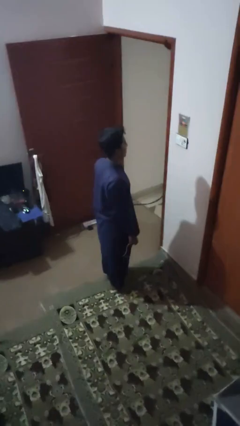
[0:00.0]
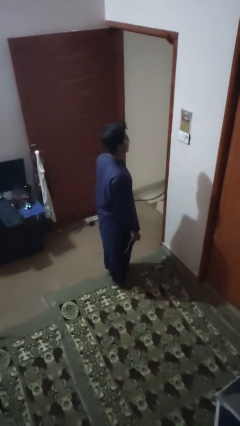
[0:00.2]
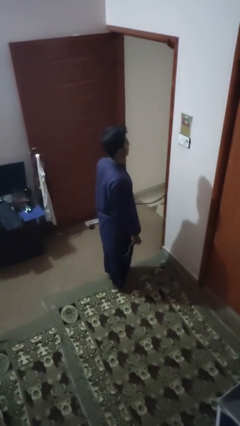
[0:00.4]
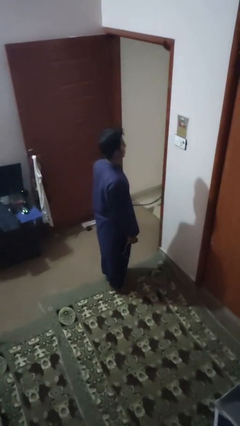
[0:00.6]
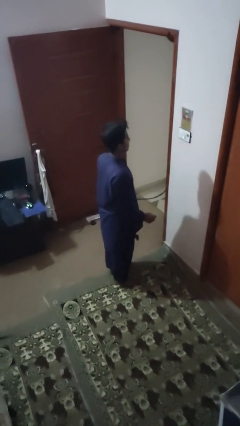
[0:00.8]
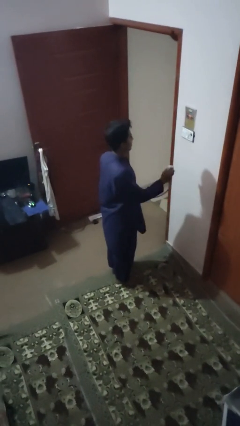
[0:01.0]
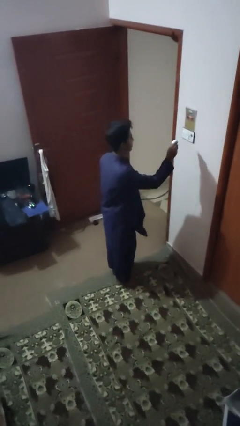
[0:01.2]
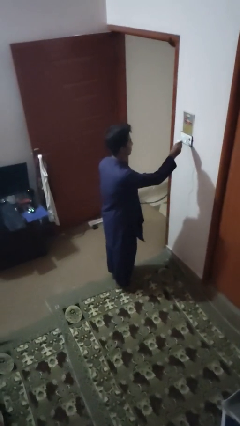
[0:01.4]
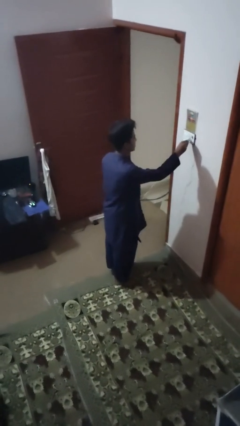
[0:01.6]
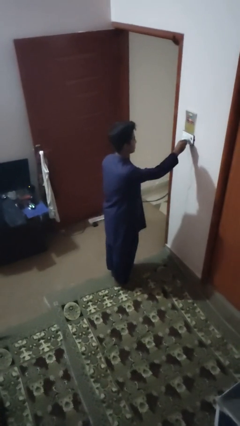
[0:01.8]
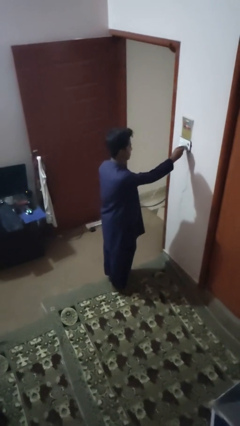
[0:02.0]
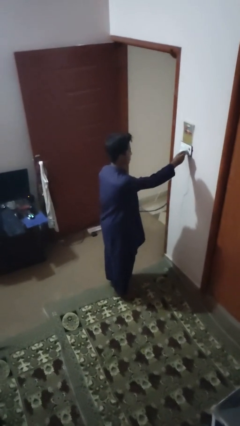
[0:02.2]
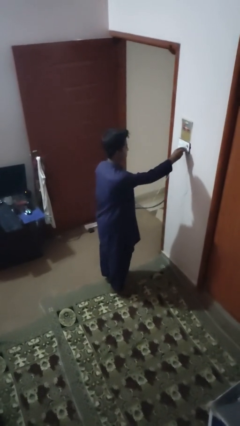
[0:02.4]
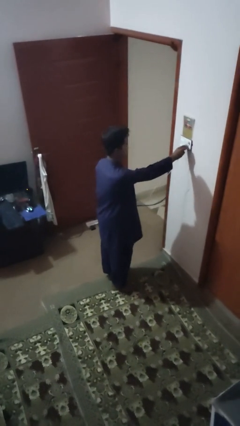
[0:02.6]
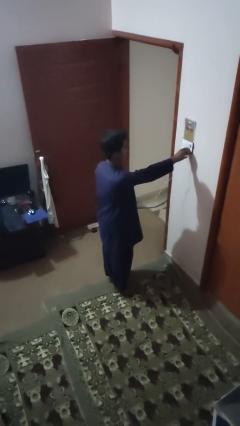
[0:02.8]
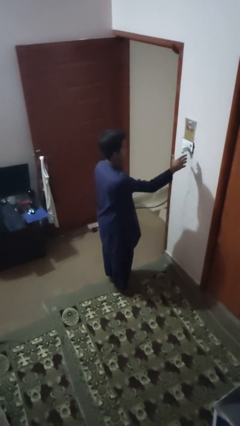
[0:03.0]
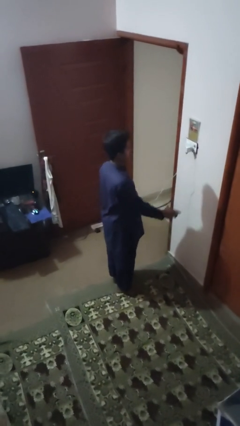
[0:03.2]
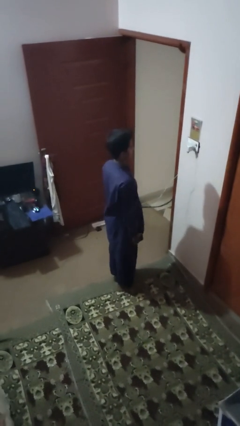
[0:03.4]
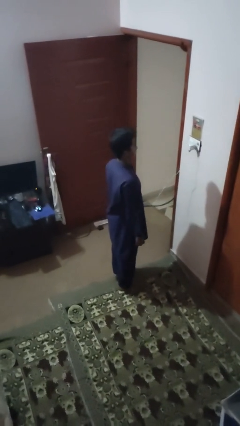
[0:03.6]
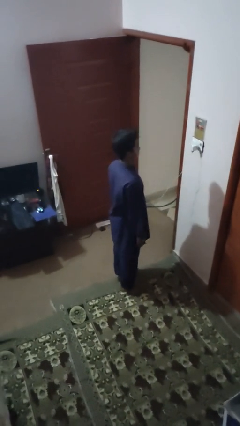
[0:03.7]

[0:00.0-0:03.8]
person plugs into electrical socket

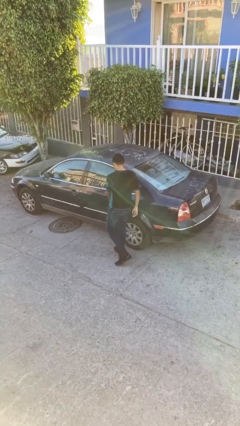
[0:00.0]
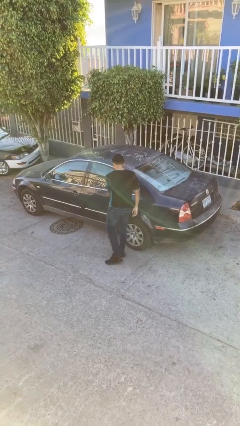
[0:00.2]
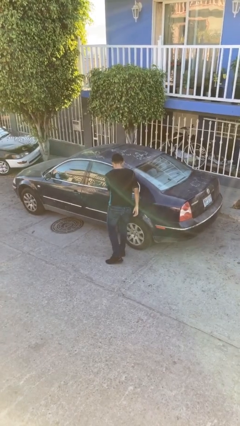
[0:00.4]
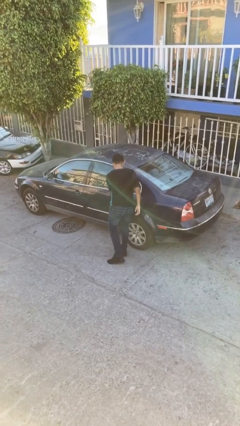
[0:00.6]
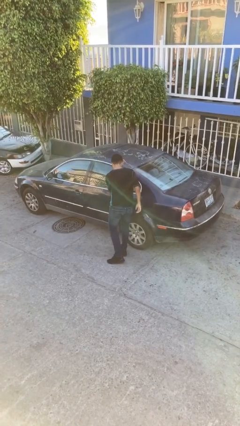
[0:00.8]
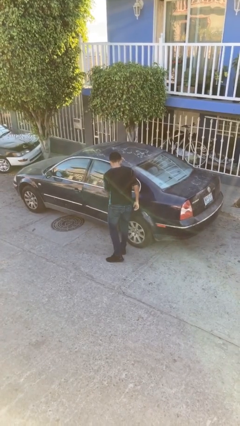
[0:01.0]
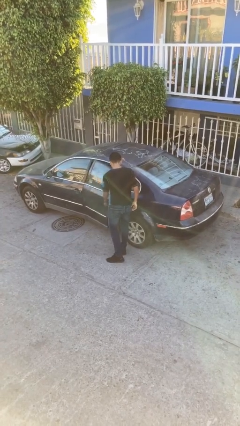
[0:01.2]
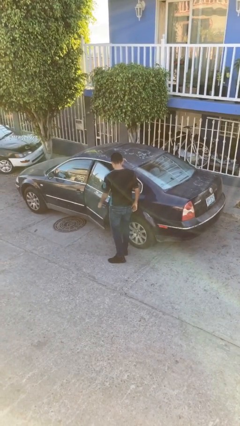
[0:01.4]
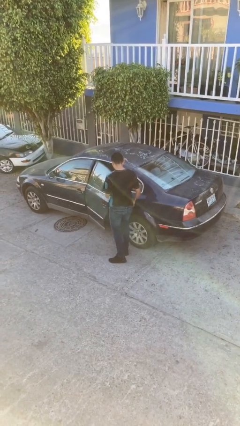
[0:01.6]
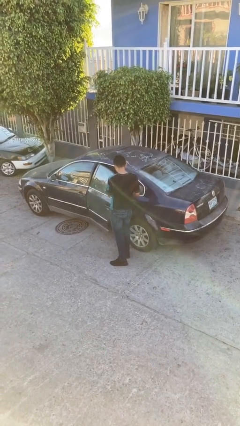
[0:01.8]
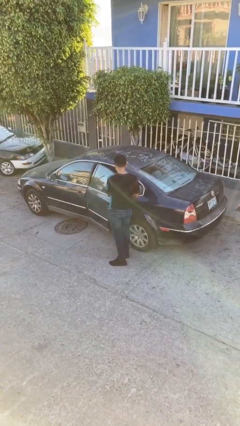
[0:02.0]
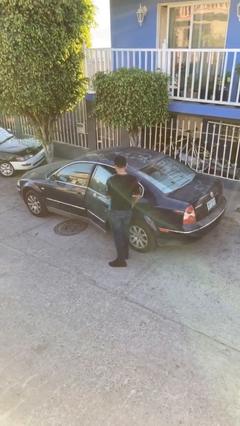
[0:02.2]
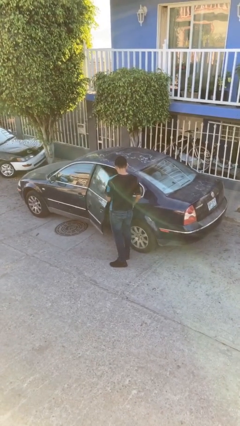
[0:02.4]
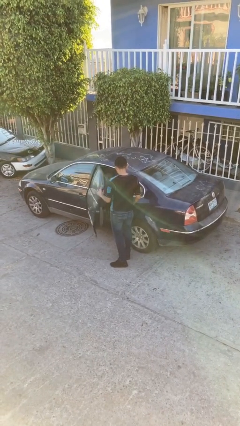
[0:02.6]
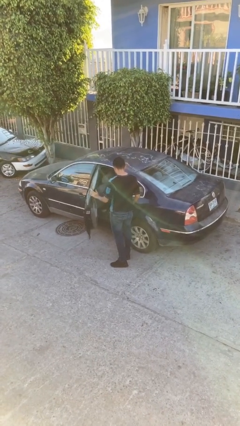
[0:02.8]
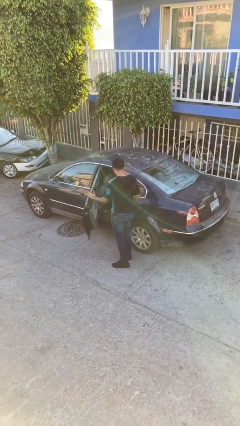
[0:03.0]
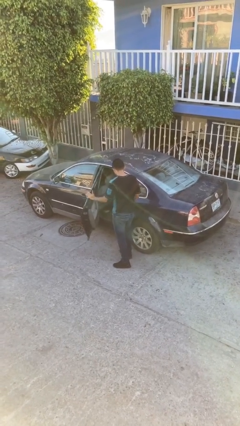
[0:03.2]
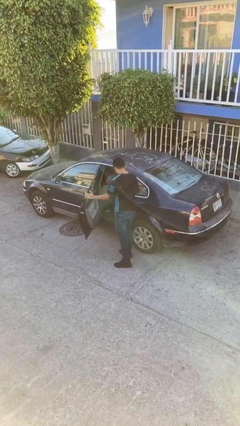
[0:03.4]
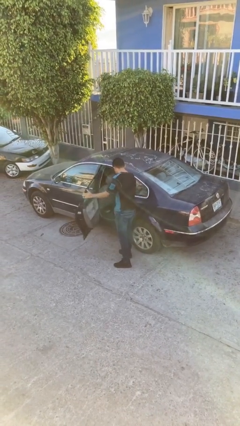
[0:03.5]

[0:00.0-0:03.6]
person opens car door

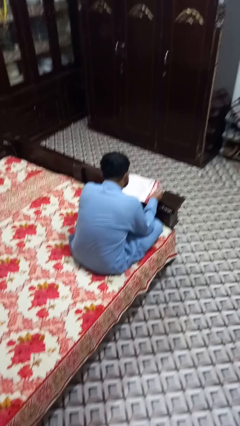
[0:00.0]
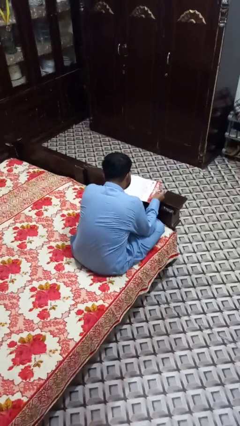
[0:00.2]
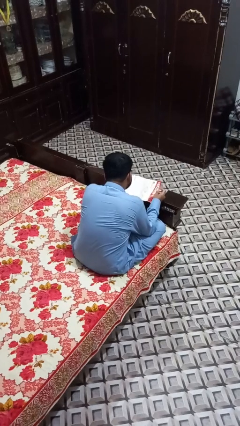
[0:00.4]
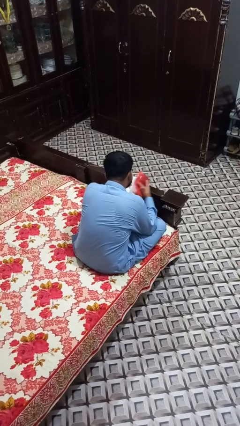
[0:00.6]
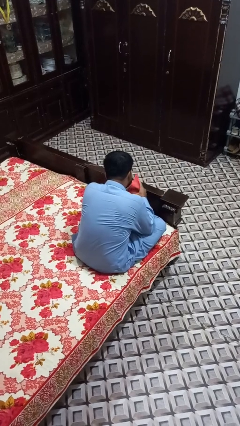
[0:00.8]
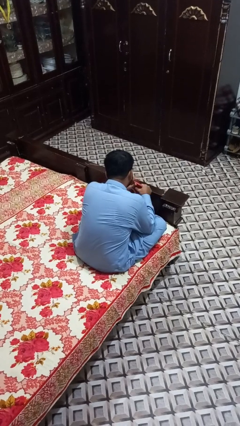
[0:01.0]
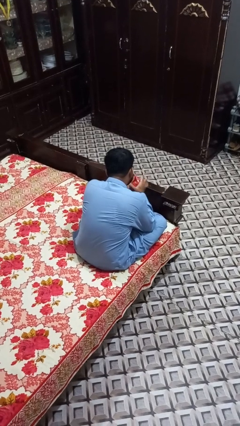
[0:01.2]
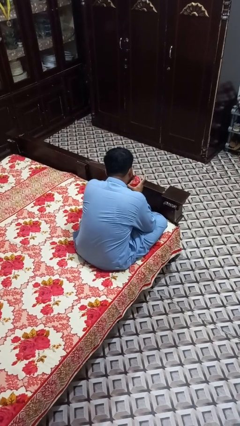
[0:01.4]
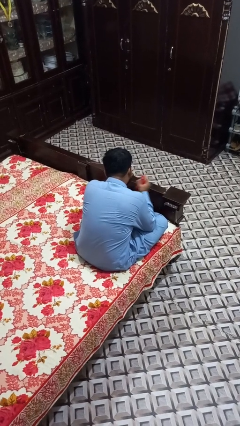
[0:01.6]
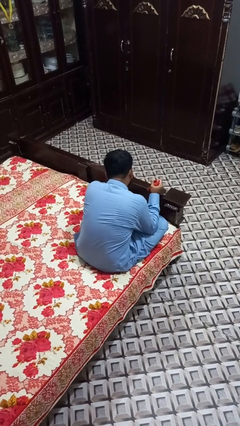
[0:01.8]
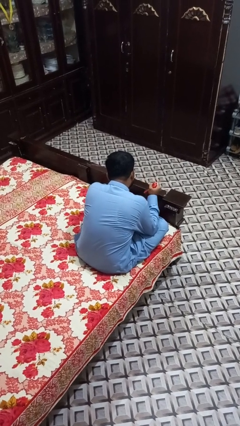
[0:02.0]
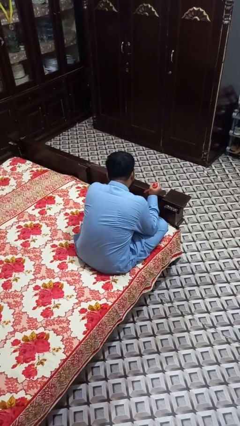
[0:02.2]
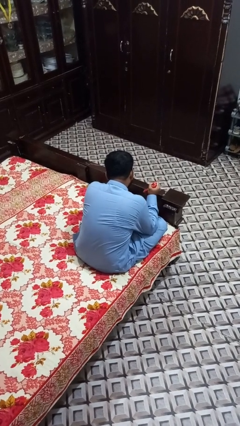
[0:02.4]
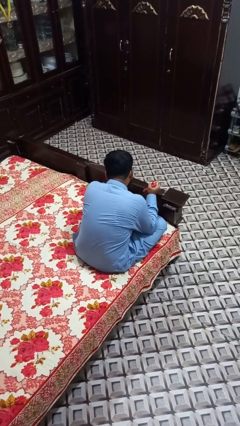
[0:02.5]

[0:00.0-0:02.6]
person crumples paper

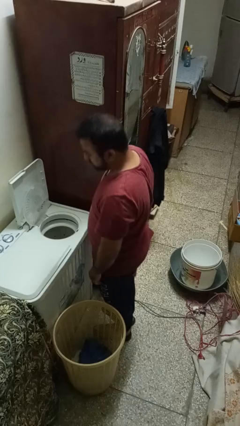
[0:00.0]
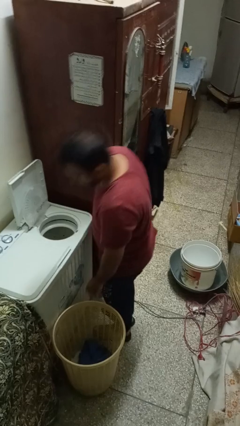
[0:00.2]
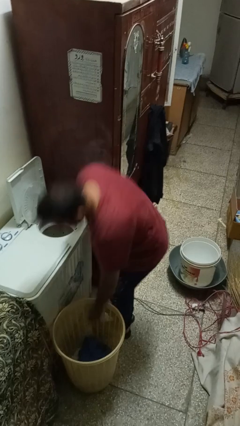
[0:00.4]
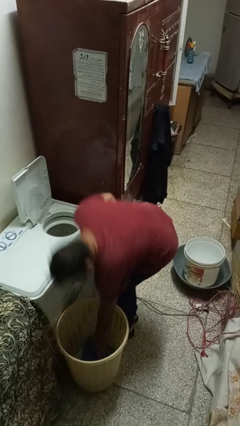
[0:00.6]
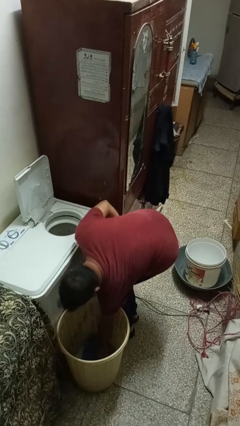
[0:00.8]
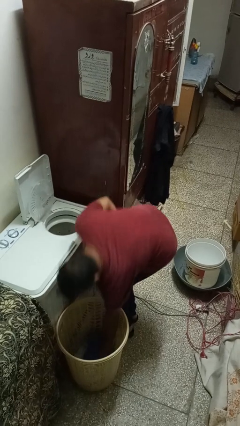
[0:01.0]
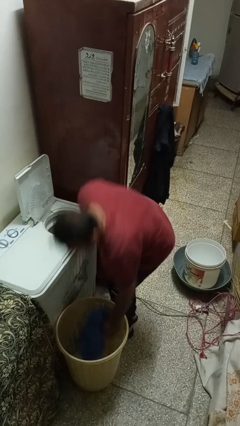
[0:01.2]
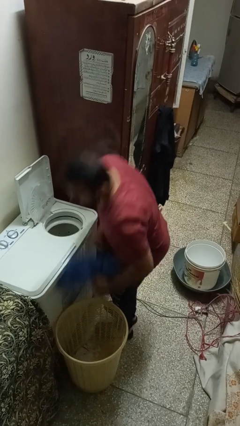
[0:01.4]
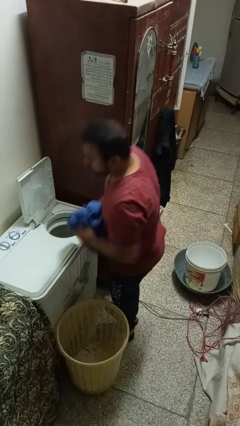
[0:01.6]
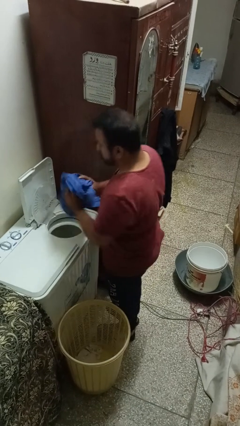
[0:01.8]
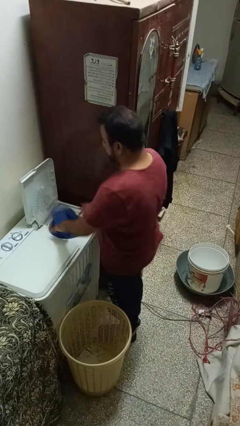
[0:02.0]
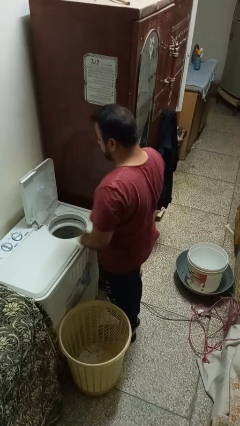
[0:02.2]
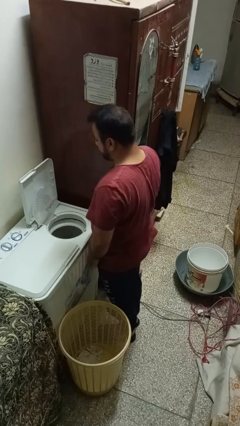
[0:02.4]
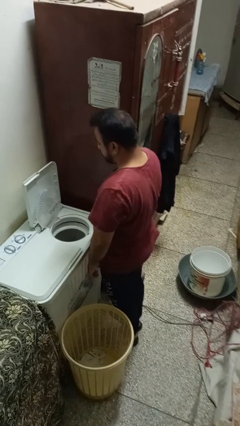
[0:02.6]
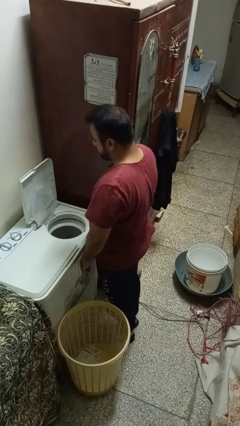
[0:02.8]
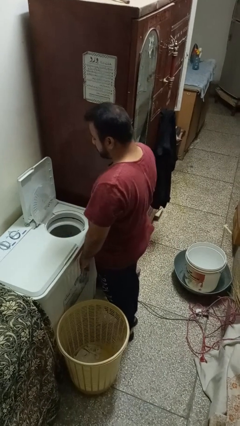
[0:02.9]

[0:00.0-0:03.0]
person loads dryer

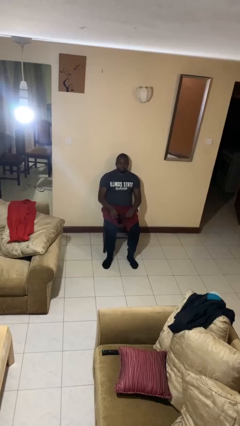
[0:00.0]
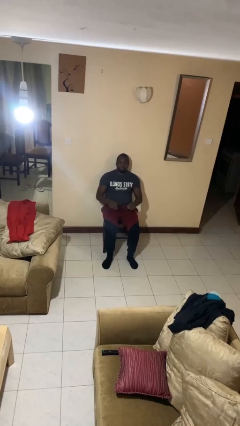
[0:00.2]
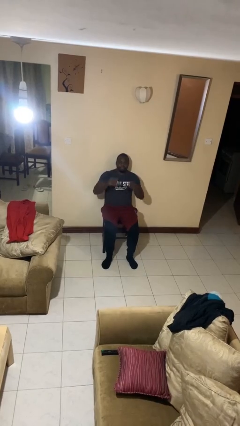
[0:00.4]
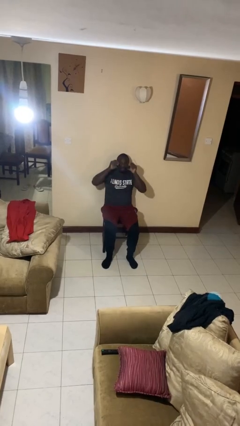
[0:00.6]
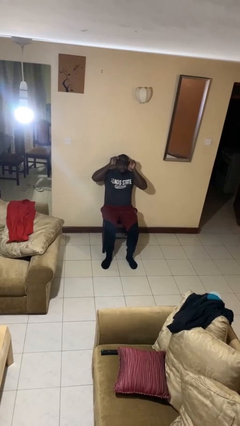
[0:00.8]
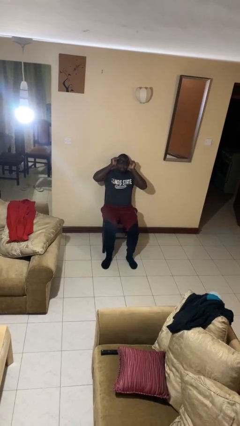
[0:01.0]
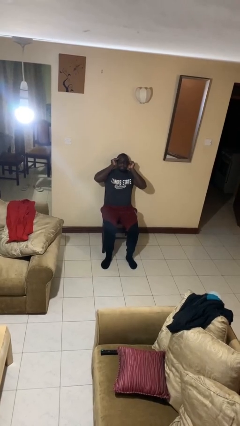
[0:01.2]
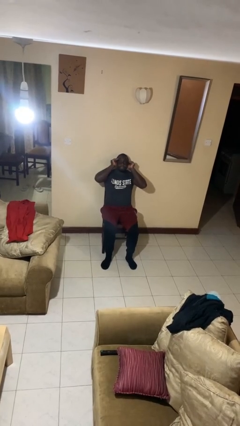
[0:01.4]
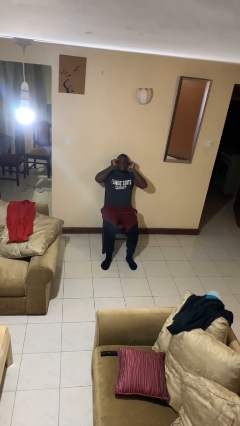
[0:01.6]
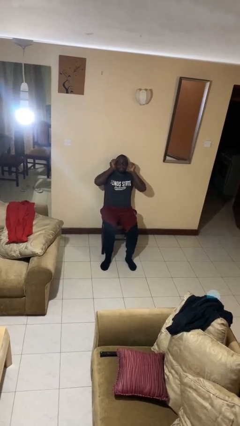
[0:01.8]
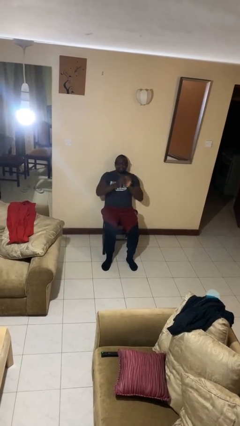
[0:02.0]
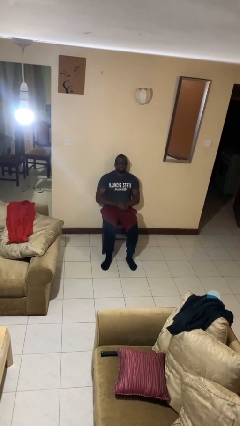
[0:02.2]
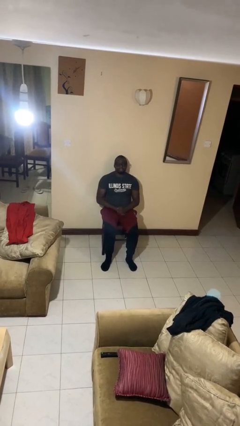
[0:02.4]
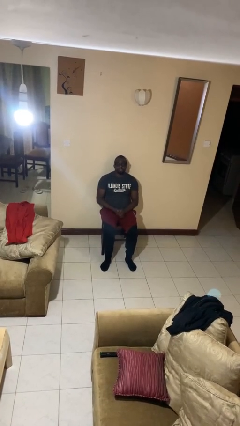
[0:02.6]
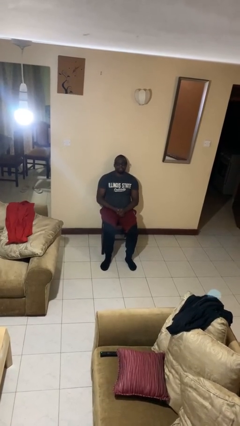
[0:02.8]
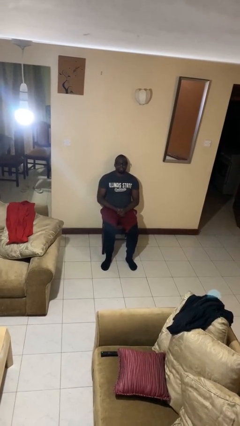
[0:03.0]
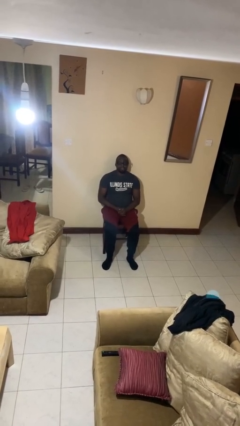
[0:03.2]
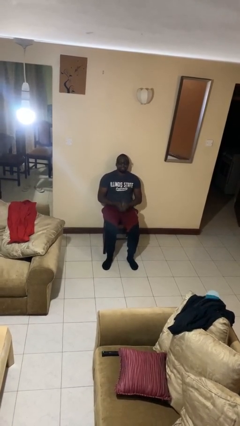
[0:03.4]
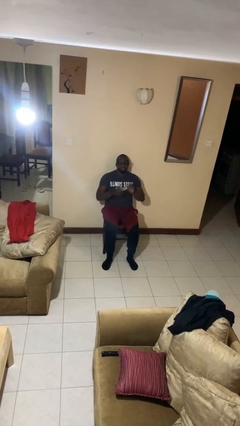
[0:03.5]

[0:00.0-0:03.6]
person puts on glasses

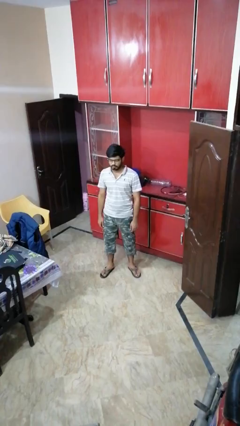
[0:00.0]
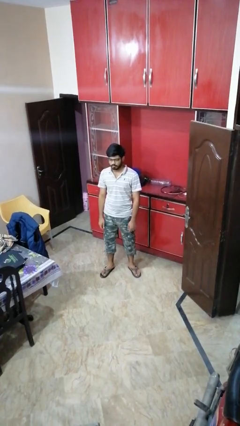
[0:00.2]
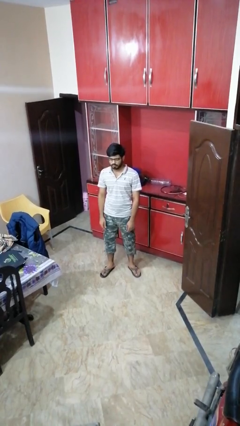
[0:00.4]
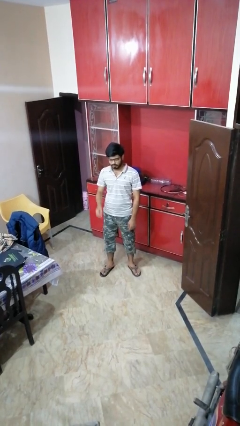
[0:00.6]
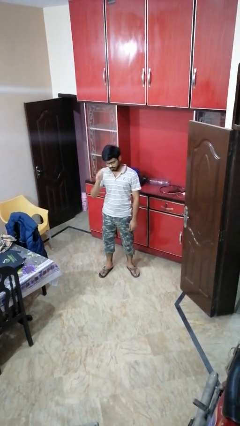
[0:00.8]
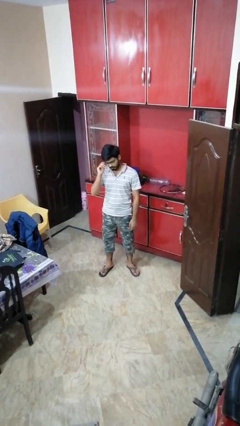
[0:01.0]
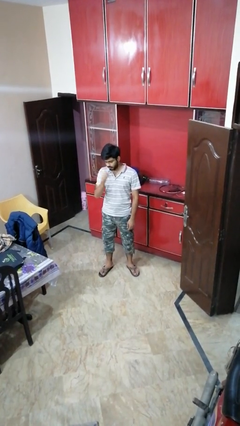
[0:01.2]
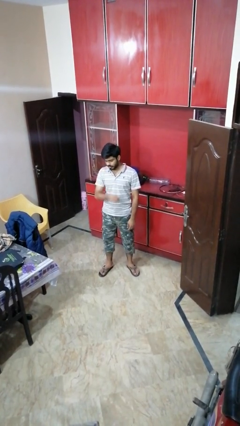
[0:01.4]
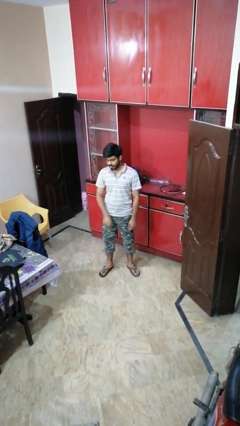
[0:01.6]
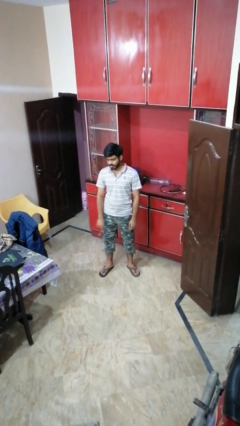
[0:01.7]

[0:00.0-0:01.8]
person takes off glasses
